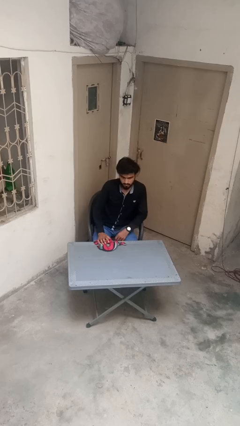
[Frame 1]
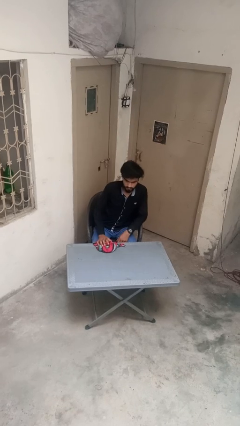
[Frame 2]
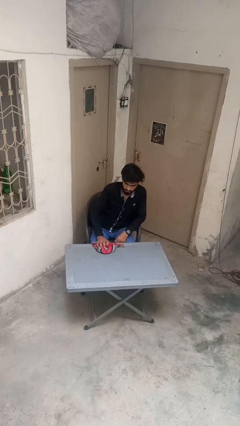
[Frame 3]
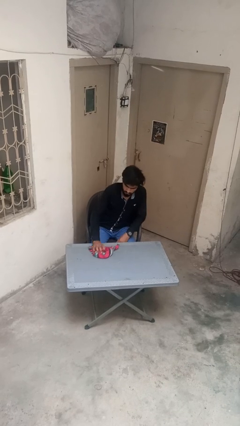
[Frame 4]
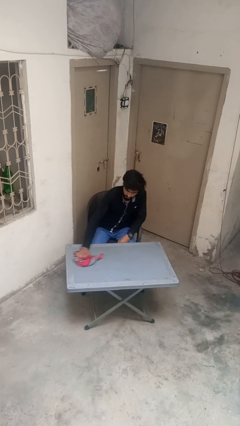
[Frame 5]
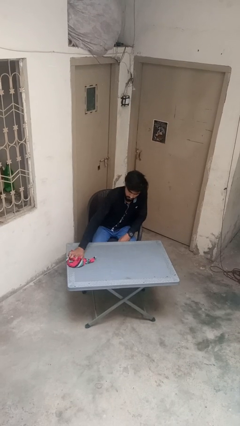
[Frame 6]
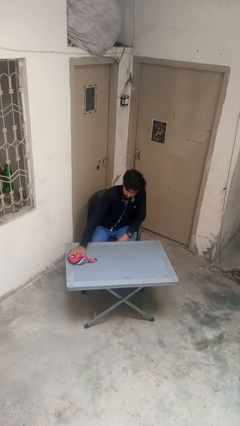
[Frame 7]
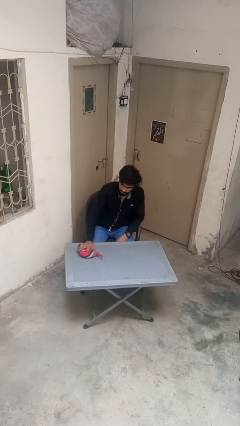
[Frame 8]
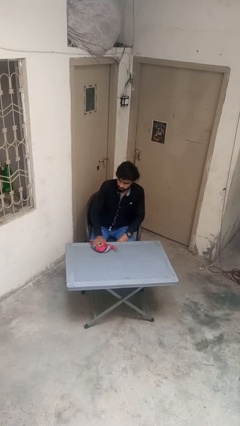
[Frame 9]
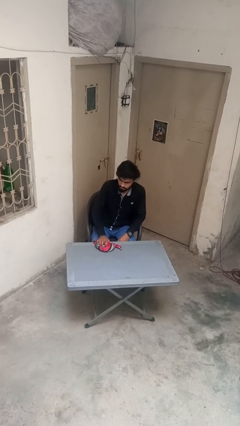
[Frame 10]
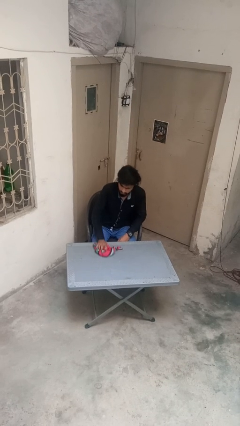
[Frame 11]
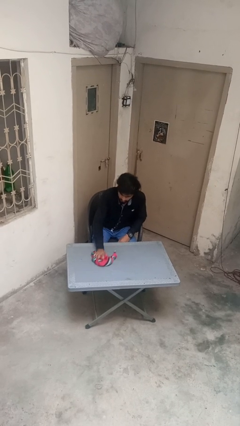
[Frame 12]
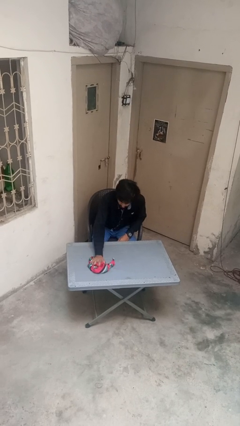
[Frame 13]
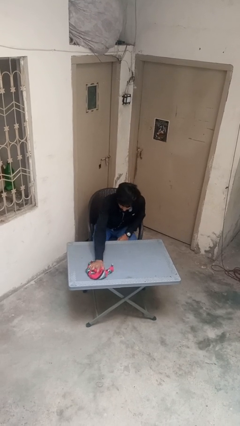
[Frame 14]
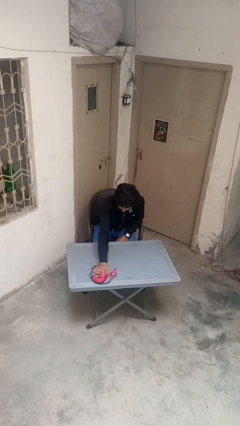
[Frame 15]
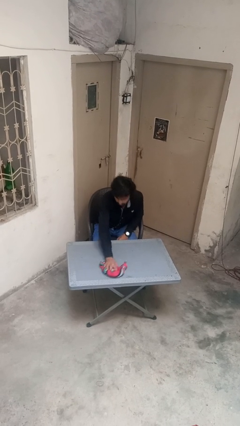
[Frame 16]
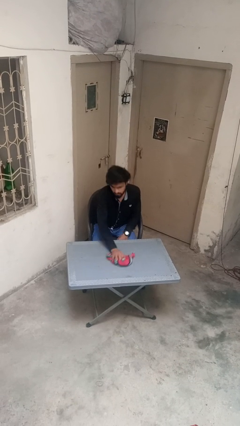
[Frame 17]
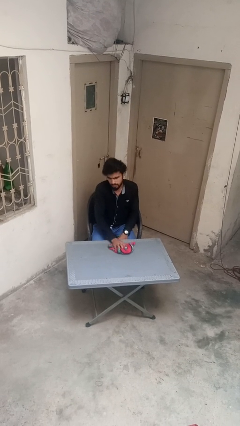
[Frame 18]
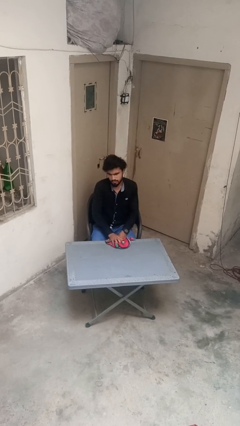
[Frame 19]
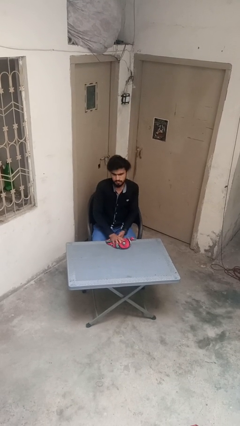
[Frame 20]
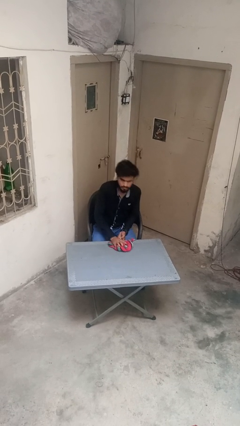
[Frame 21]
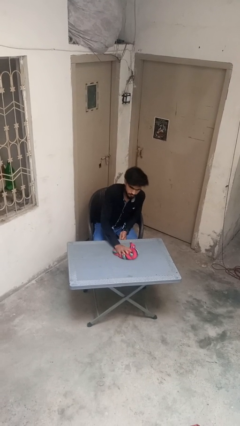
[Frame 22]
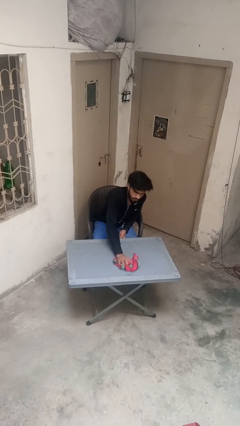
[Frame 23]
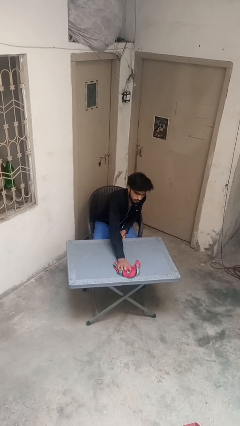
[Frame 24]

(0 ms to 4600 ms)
person cleans table with rag

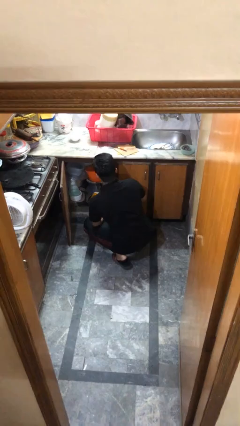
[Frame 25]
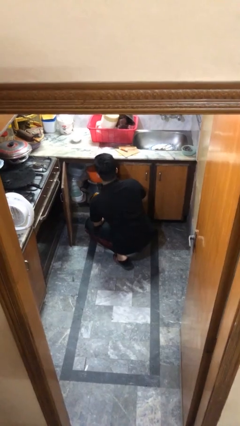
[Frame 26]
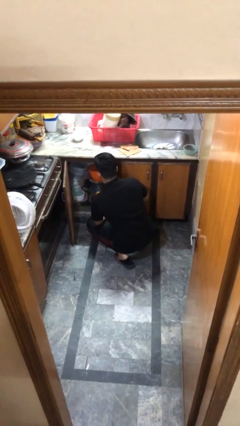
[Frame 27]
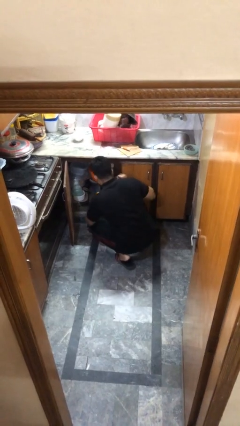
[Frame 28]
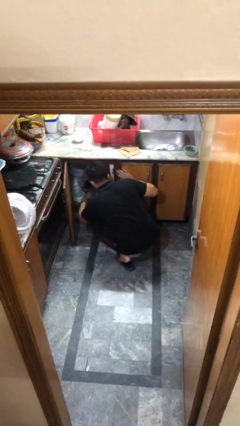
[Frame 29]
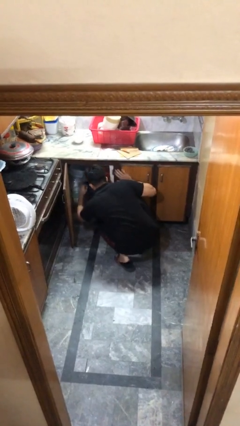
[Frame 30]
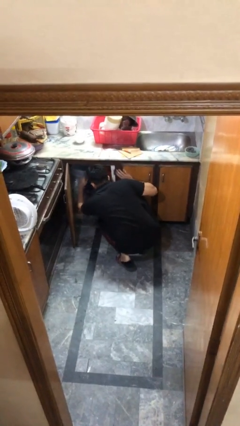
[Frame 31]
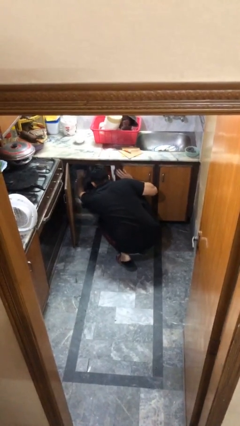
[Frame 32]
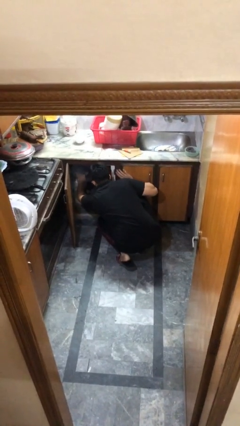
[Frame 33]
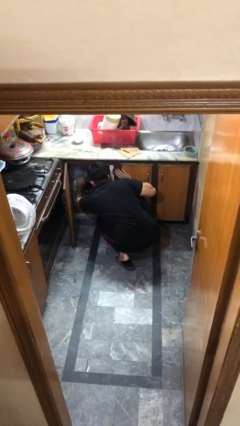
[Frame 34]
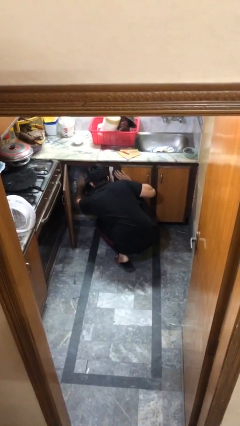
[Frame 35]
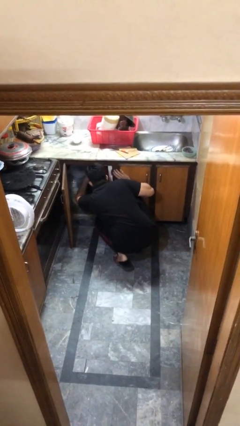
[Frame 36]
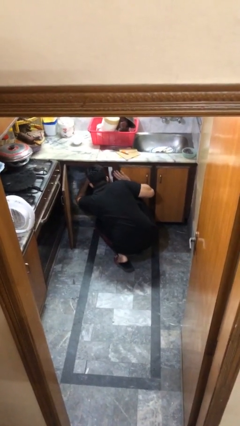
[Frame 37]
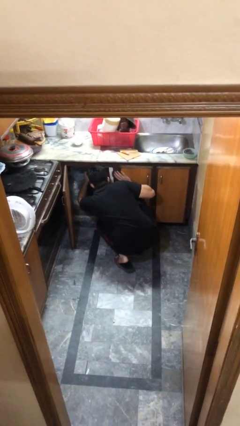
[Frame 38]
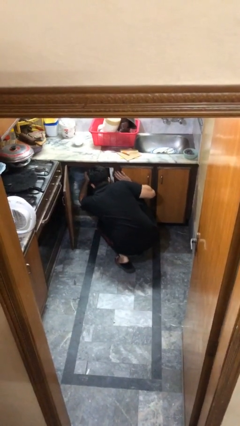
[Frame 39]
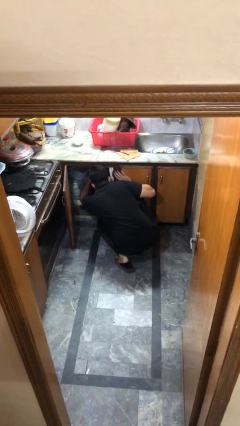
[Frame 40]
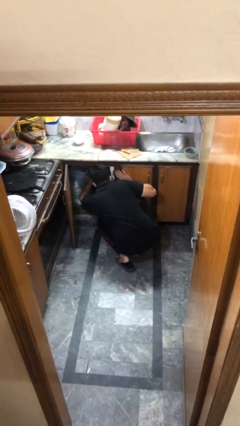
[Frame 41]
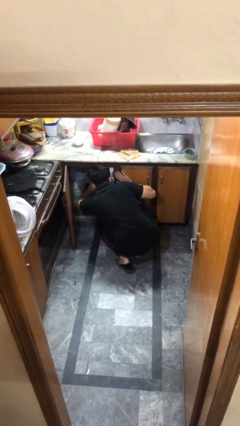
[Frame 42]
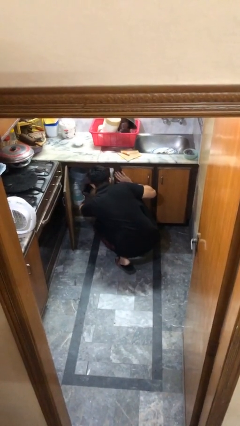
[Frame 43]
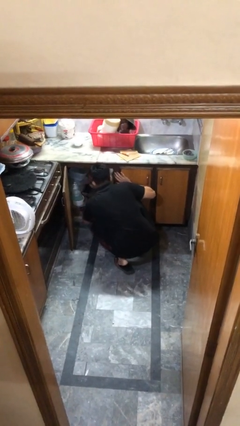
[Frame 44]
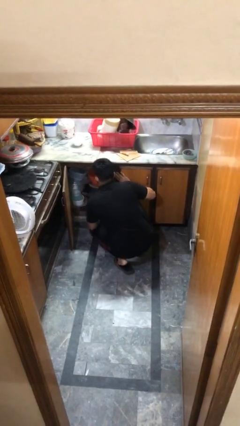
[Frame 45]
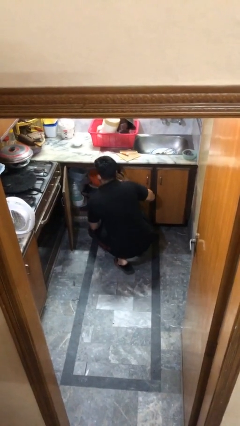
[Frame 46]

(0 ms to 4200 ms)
person searches in kitchen drawer

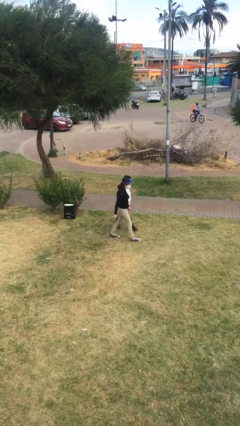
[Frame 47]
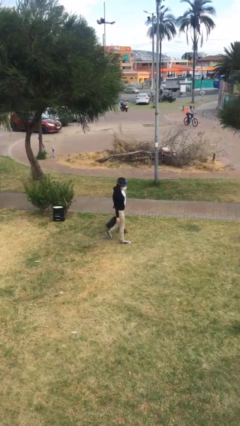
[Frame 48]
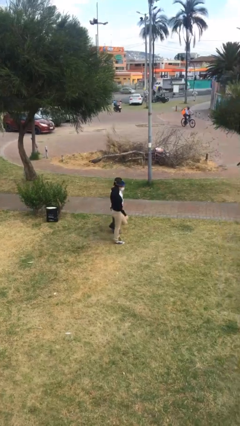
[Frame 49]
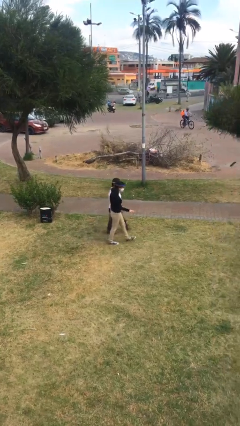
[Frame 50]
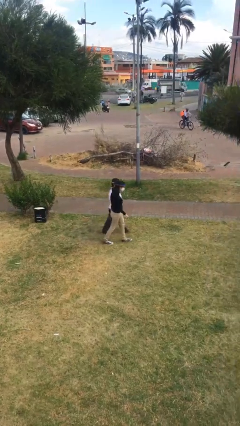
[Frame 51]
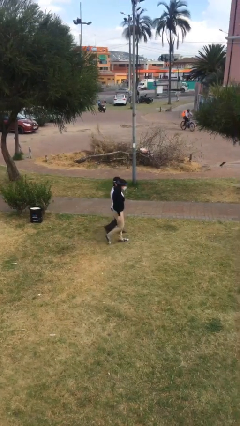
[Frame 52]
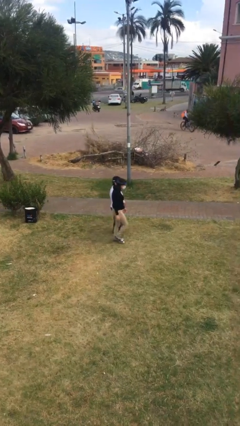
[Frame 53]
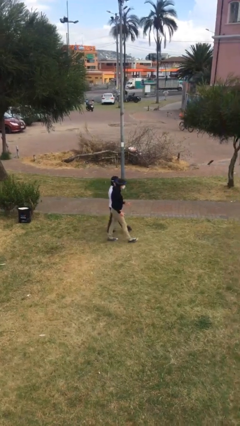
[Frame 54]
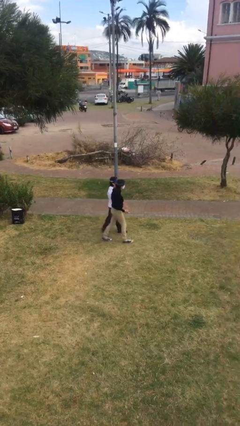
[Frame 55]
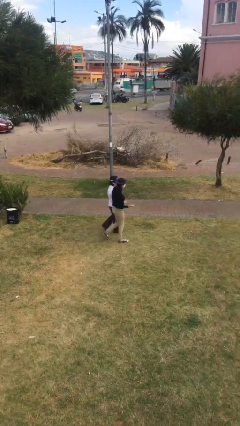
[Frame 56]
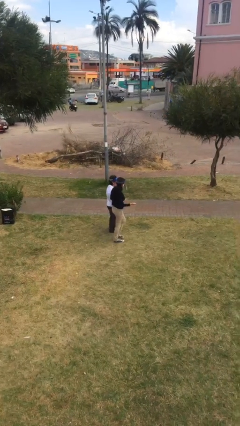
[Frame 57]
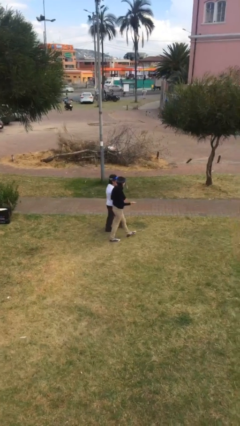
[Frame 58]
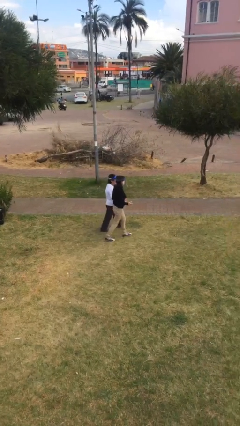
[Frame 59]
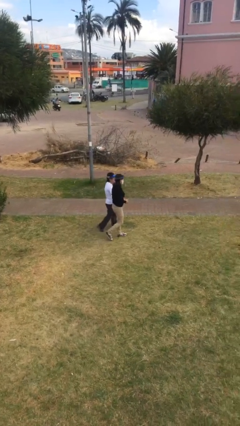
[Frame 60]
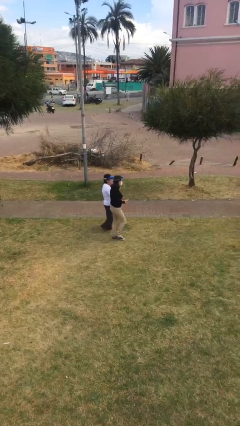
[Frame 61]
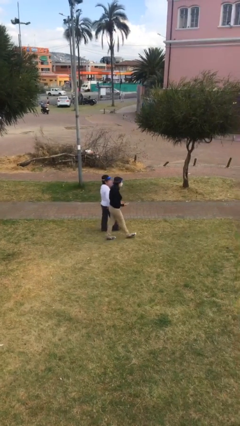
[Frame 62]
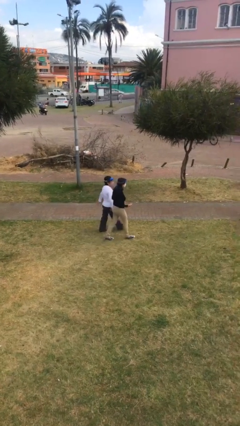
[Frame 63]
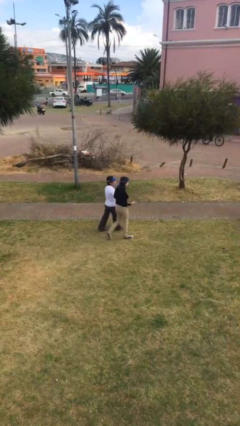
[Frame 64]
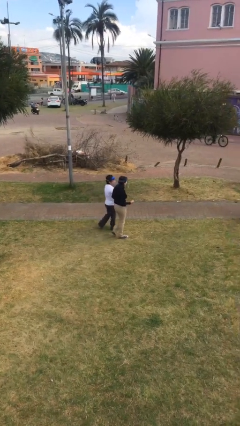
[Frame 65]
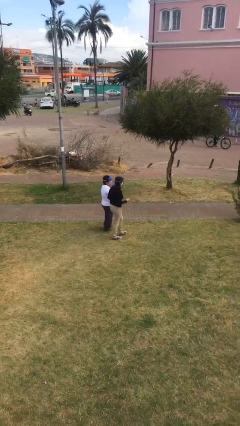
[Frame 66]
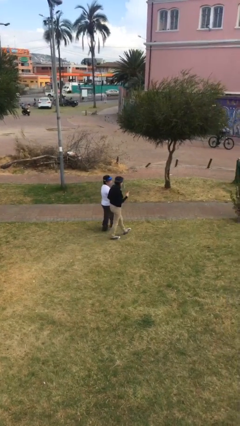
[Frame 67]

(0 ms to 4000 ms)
person talks to person

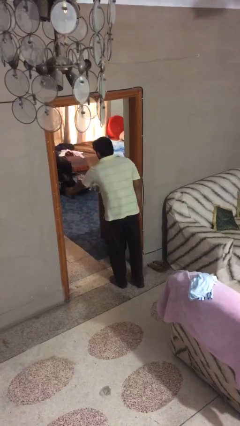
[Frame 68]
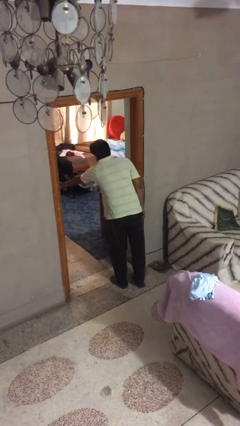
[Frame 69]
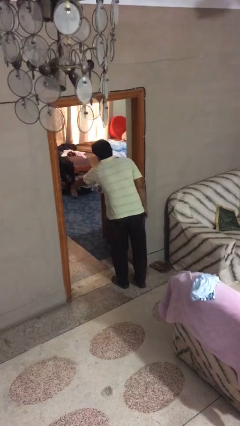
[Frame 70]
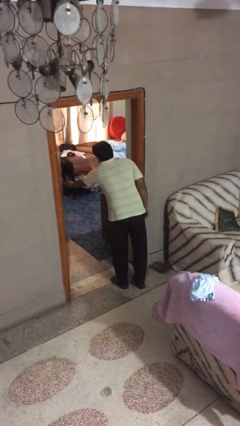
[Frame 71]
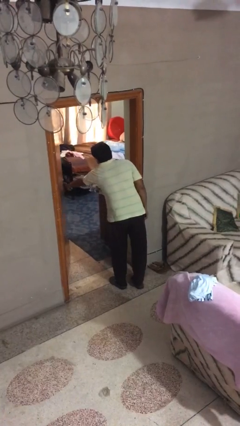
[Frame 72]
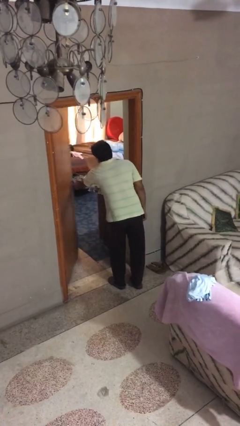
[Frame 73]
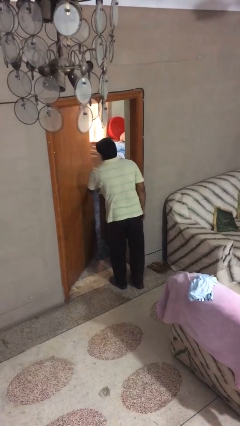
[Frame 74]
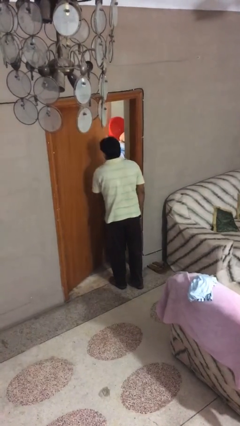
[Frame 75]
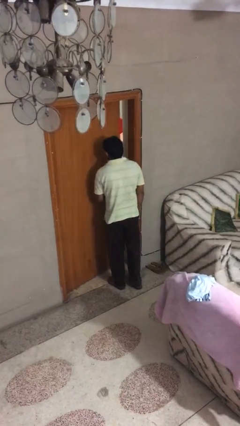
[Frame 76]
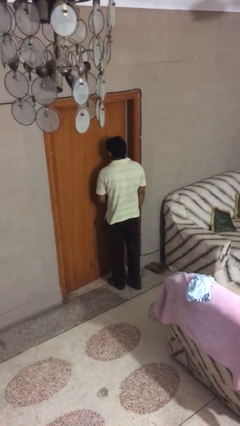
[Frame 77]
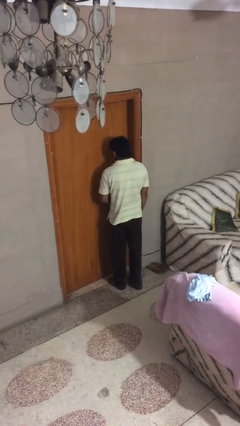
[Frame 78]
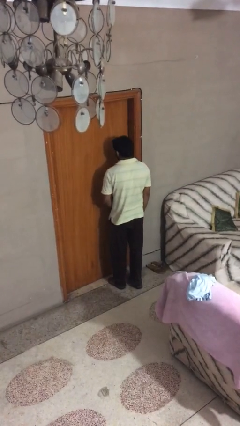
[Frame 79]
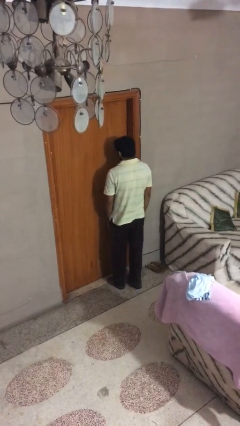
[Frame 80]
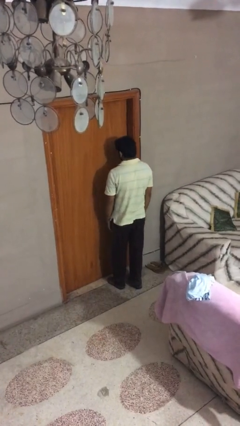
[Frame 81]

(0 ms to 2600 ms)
person closes facility door

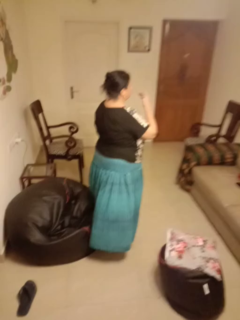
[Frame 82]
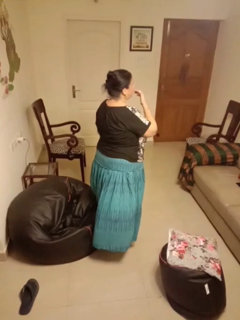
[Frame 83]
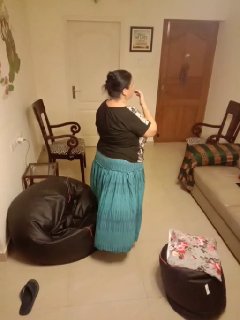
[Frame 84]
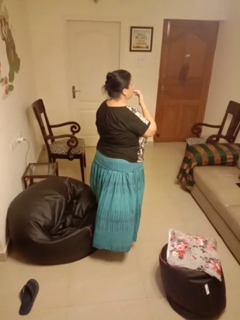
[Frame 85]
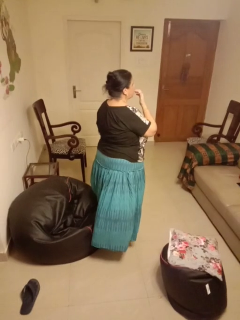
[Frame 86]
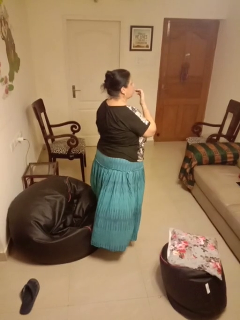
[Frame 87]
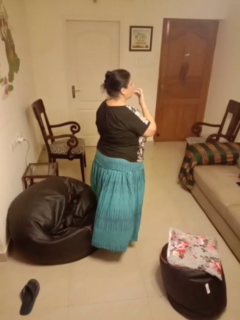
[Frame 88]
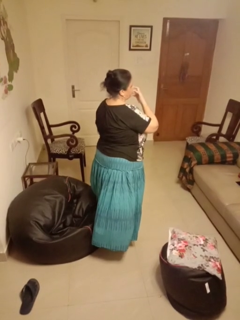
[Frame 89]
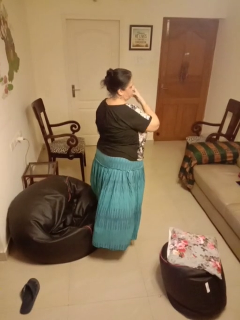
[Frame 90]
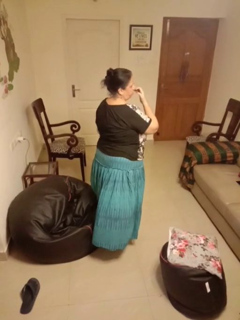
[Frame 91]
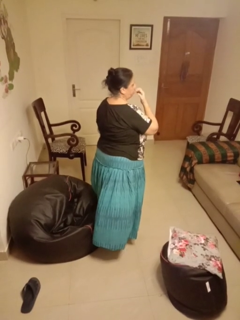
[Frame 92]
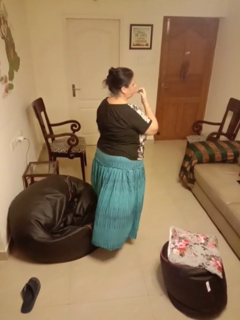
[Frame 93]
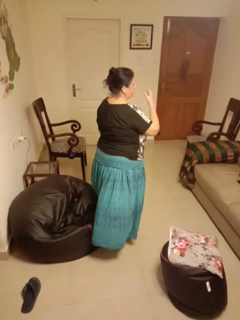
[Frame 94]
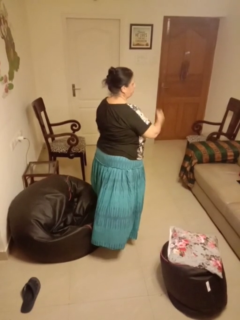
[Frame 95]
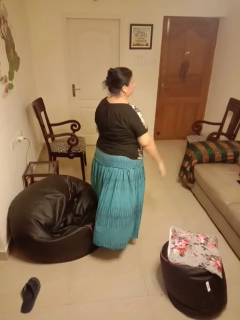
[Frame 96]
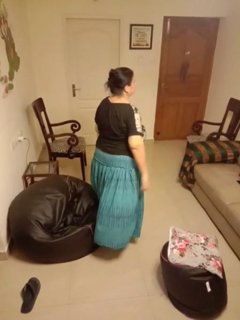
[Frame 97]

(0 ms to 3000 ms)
person licks fingers

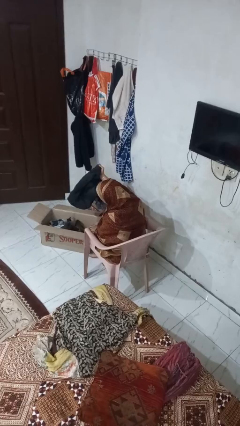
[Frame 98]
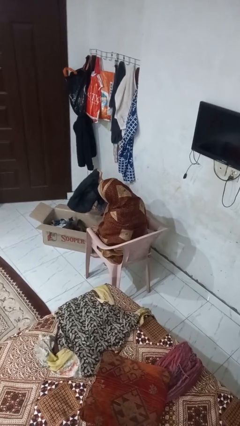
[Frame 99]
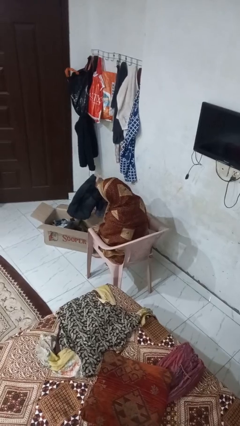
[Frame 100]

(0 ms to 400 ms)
person puts object into box
